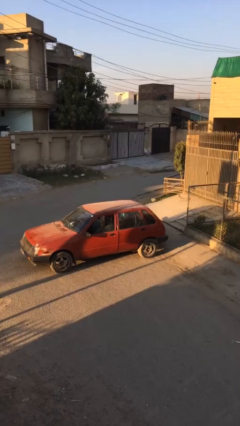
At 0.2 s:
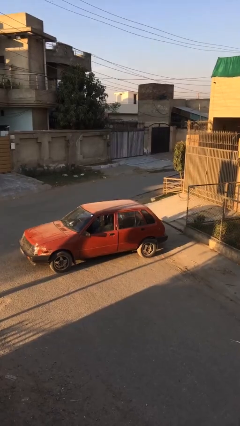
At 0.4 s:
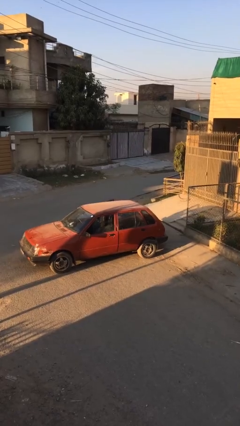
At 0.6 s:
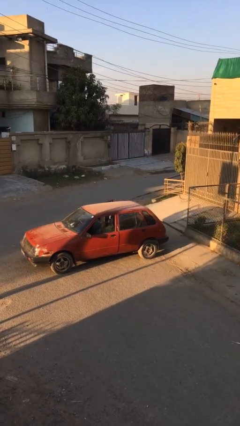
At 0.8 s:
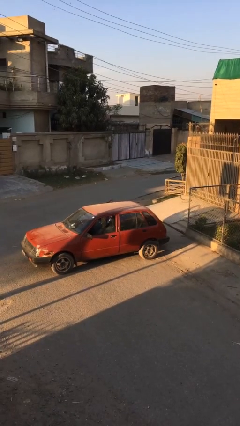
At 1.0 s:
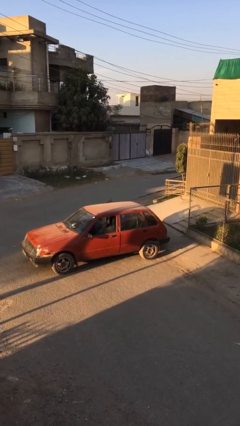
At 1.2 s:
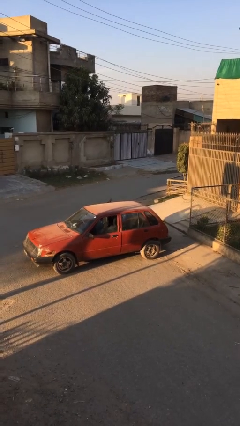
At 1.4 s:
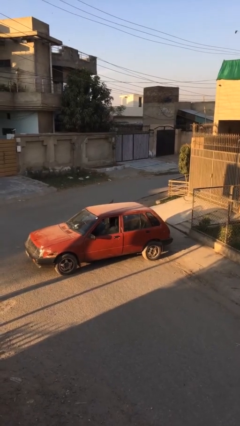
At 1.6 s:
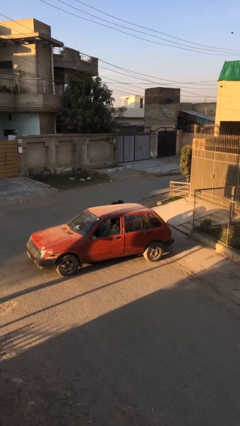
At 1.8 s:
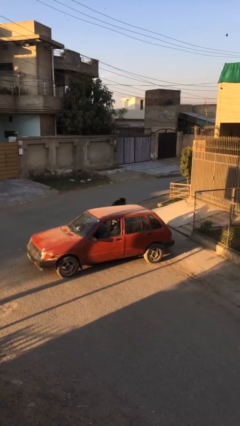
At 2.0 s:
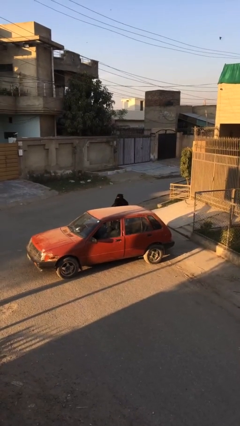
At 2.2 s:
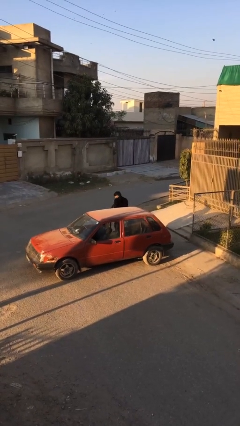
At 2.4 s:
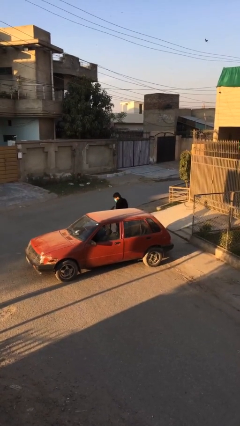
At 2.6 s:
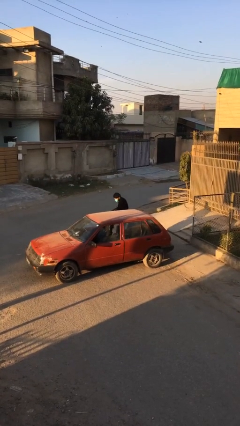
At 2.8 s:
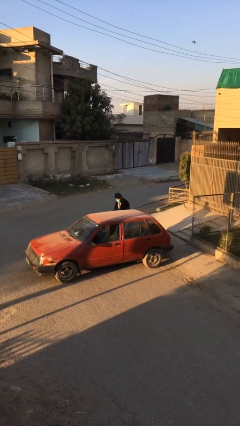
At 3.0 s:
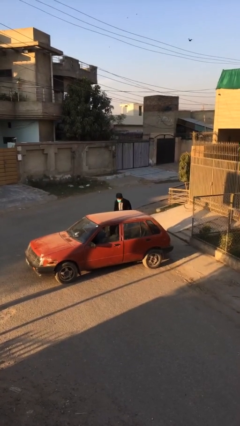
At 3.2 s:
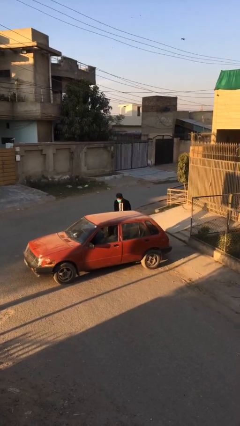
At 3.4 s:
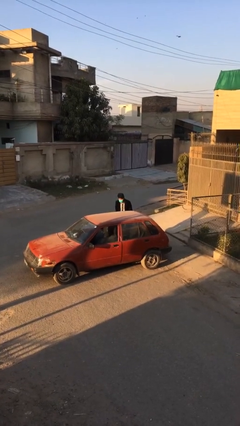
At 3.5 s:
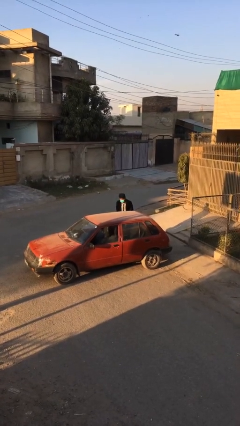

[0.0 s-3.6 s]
person exits car

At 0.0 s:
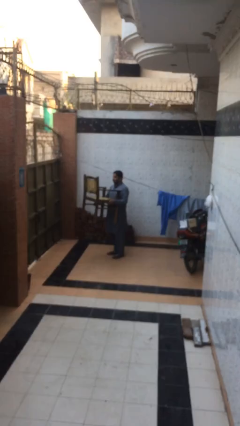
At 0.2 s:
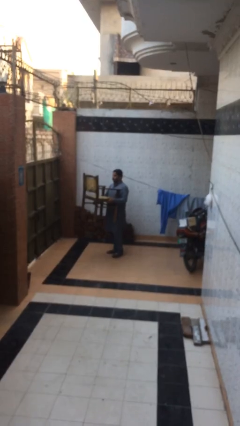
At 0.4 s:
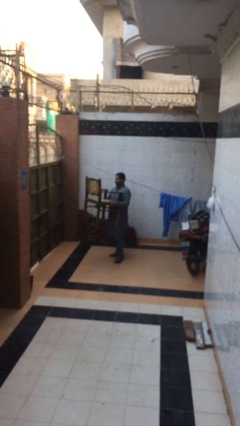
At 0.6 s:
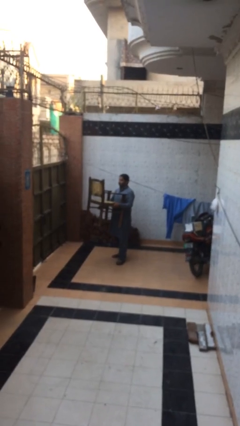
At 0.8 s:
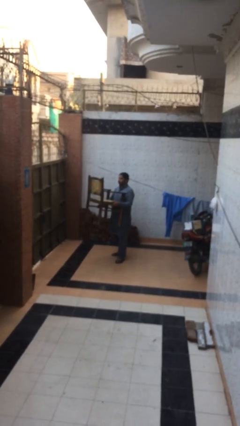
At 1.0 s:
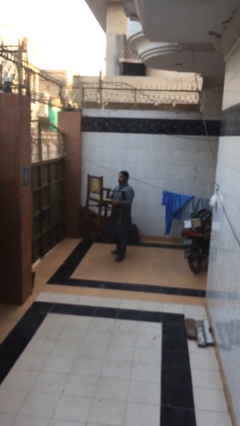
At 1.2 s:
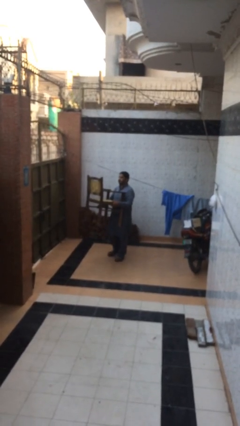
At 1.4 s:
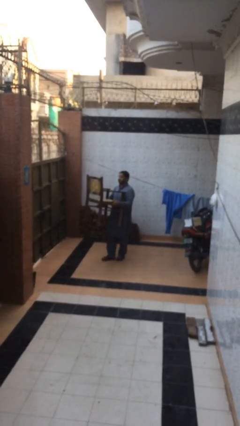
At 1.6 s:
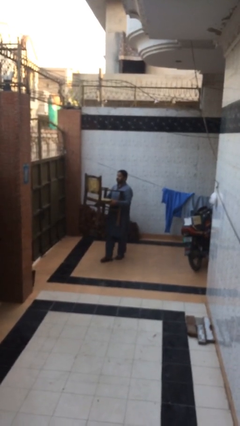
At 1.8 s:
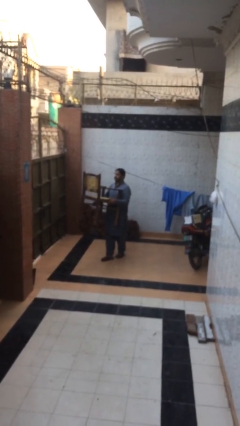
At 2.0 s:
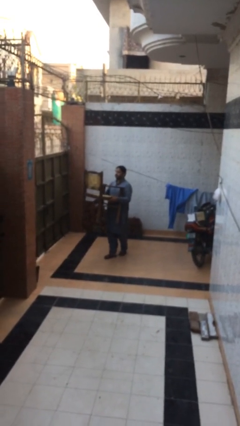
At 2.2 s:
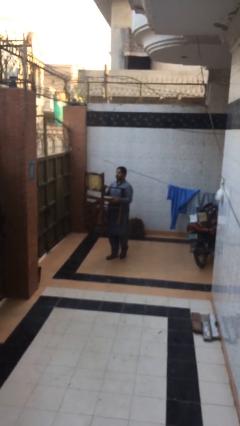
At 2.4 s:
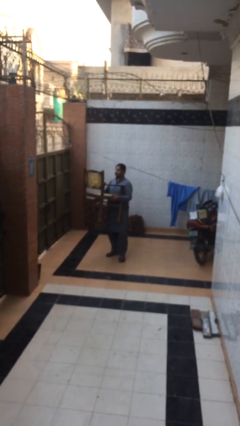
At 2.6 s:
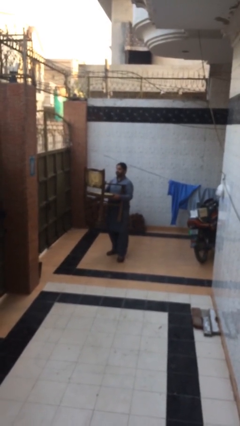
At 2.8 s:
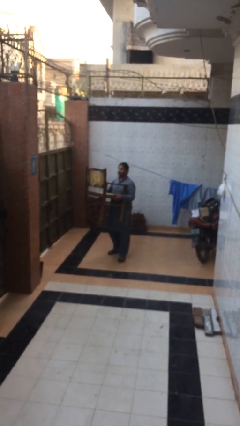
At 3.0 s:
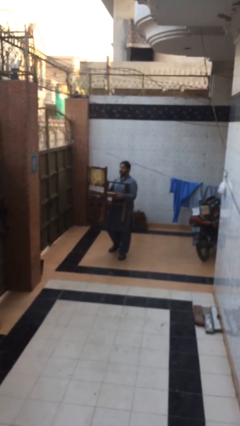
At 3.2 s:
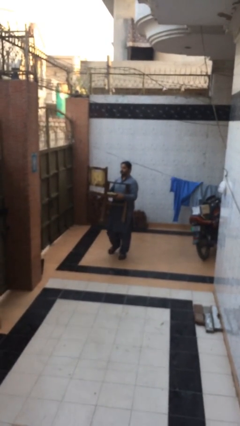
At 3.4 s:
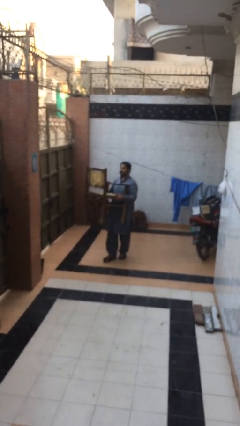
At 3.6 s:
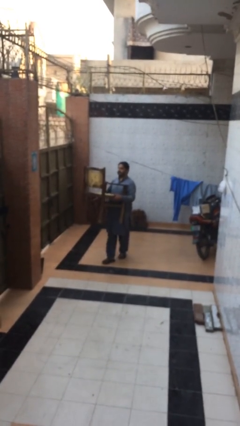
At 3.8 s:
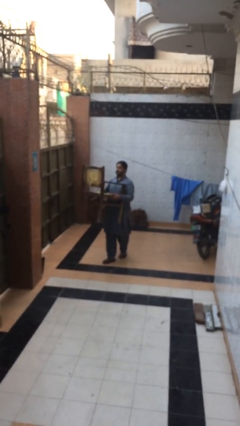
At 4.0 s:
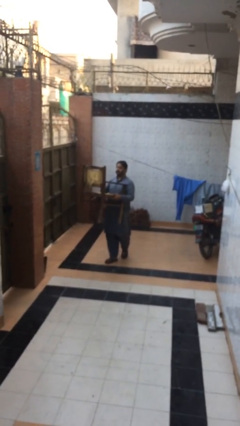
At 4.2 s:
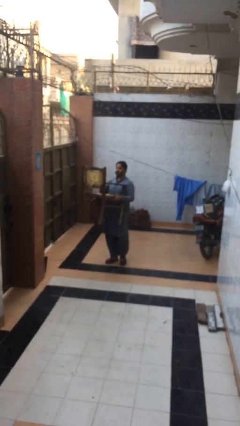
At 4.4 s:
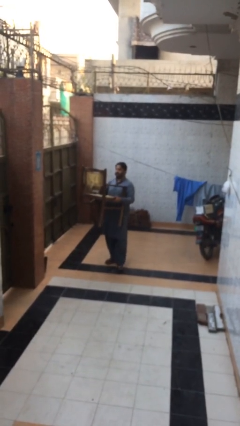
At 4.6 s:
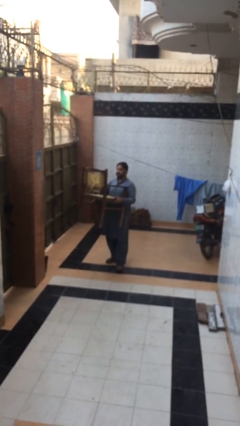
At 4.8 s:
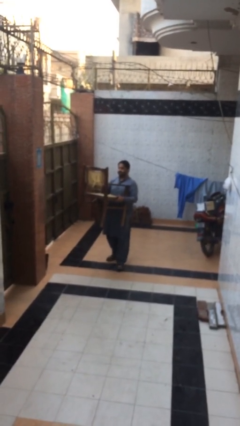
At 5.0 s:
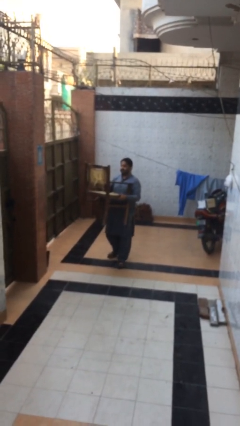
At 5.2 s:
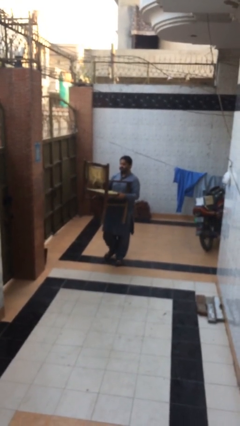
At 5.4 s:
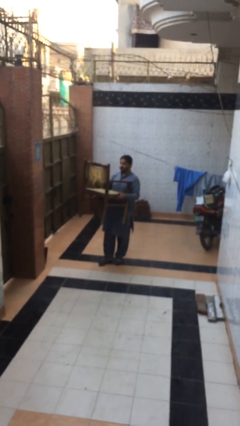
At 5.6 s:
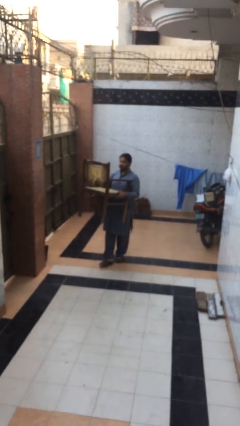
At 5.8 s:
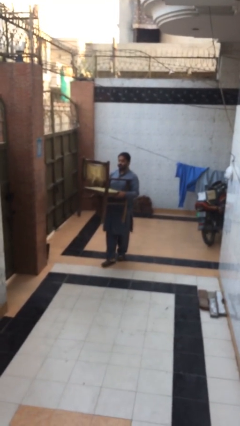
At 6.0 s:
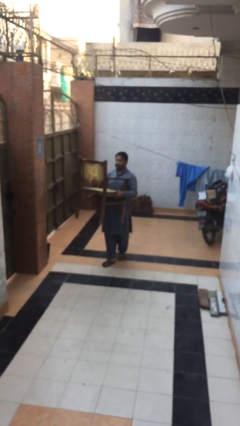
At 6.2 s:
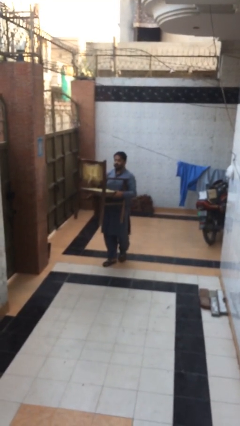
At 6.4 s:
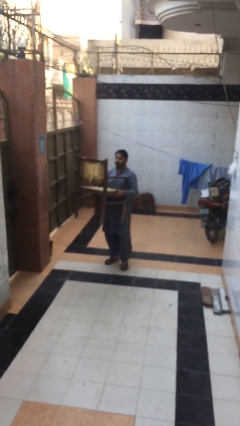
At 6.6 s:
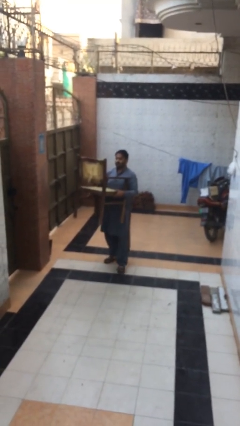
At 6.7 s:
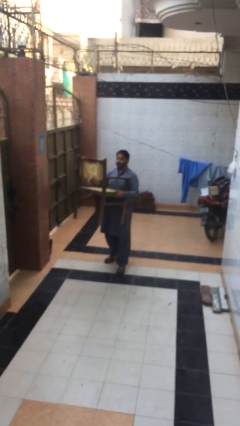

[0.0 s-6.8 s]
person carries heavy object

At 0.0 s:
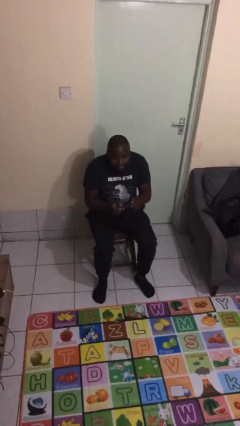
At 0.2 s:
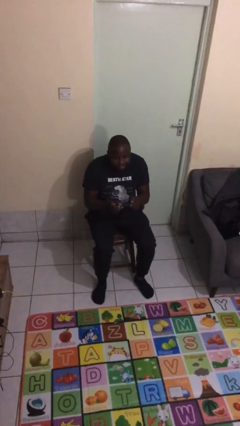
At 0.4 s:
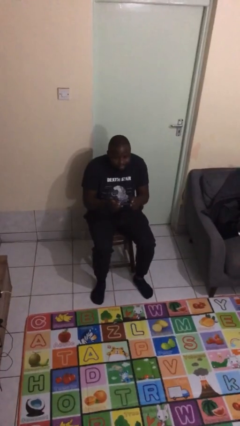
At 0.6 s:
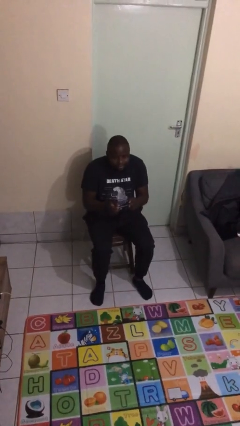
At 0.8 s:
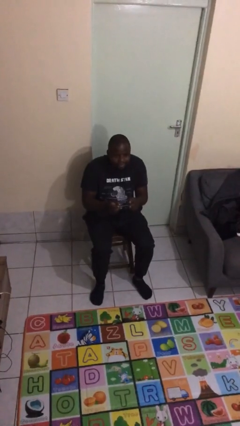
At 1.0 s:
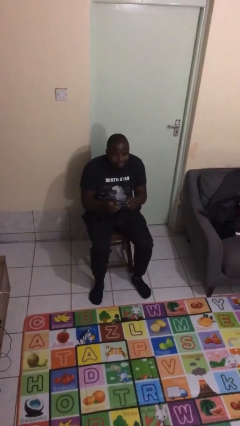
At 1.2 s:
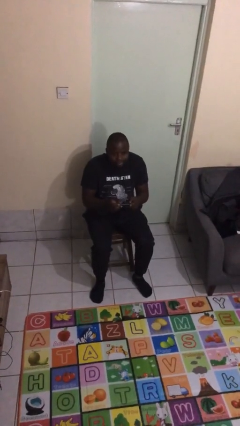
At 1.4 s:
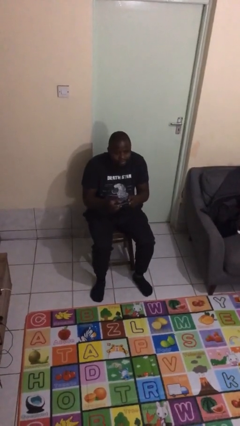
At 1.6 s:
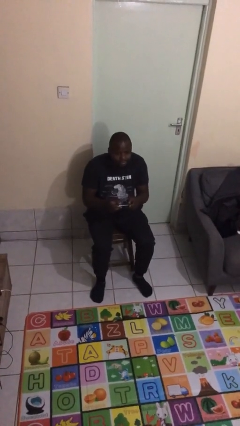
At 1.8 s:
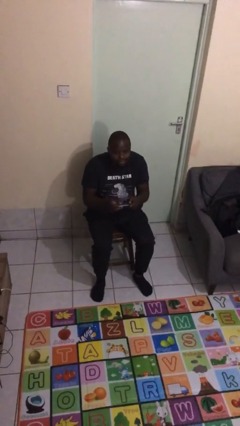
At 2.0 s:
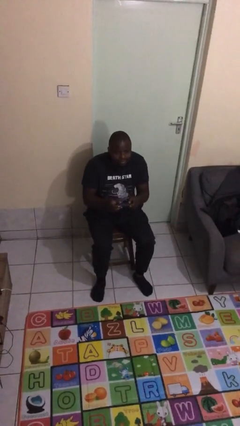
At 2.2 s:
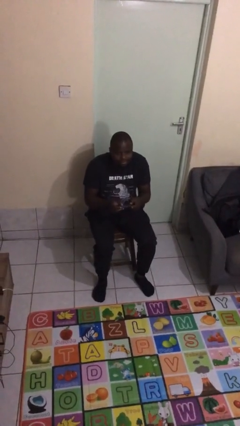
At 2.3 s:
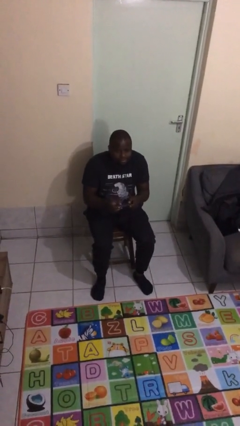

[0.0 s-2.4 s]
person interacts with handheld game

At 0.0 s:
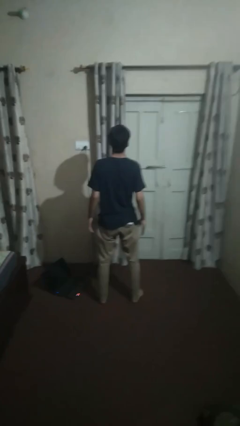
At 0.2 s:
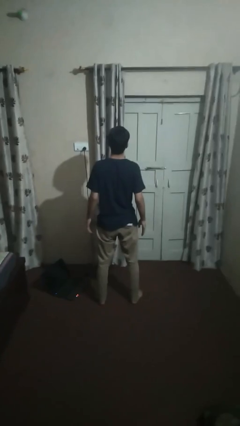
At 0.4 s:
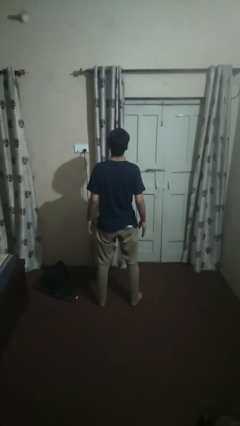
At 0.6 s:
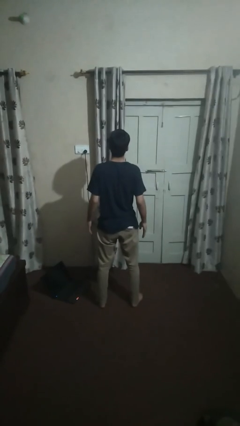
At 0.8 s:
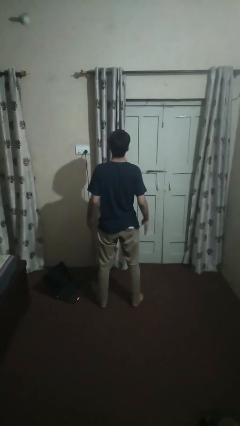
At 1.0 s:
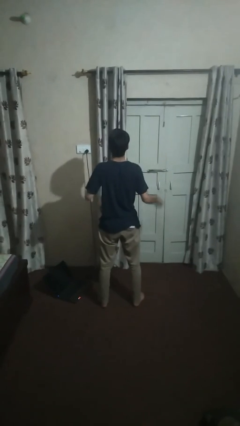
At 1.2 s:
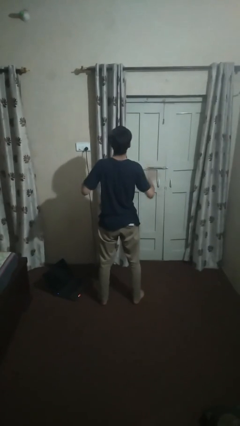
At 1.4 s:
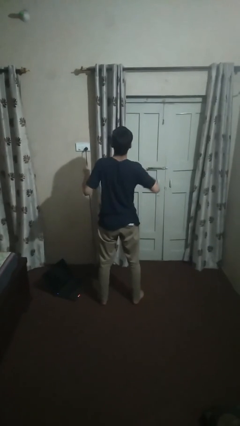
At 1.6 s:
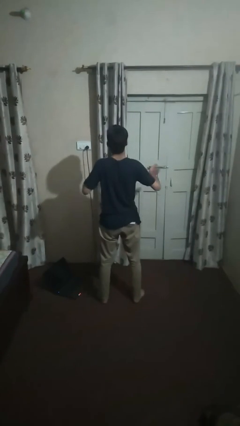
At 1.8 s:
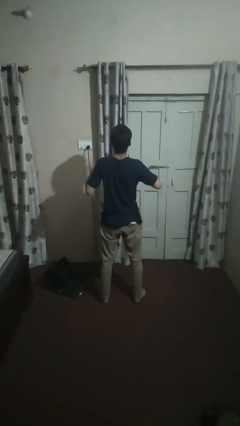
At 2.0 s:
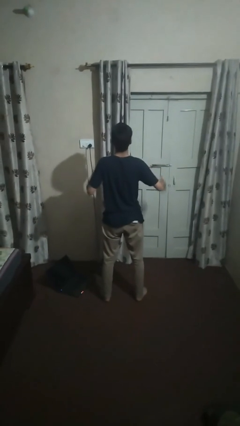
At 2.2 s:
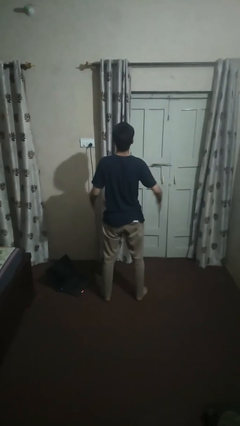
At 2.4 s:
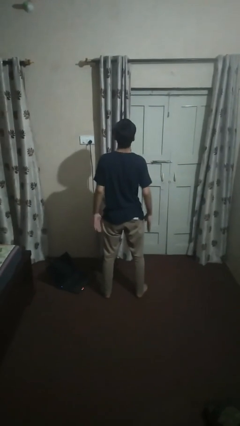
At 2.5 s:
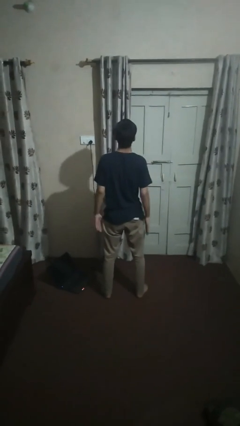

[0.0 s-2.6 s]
person drums on chest

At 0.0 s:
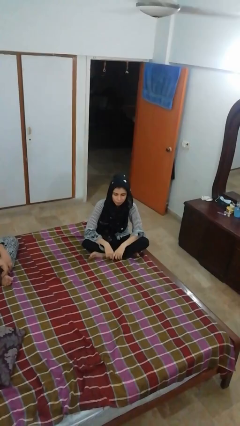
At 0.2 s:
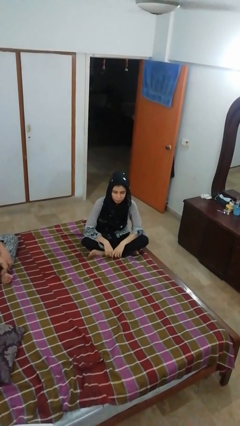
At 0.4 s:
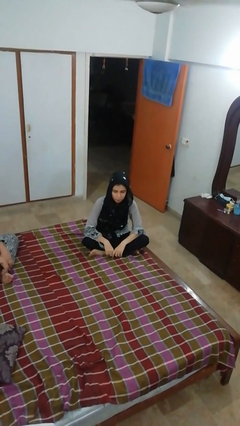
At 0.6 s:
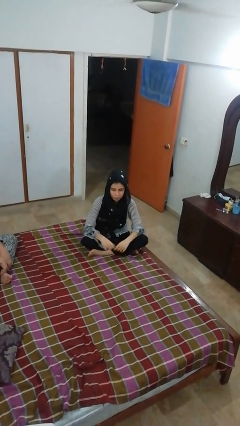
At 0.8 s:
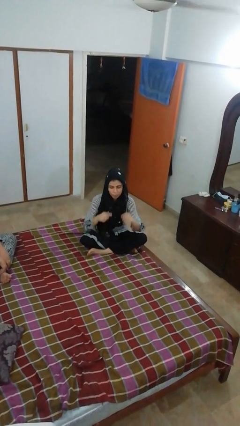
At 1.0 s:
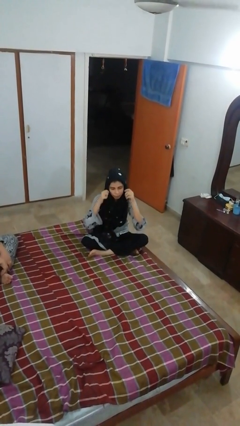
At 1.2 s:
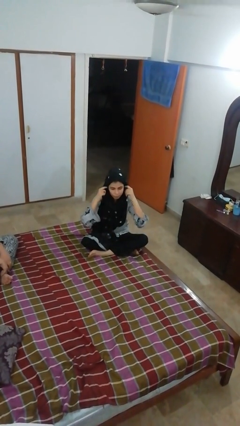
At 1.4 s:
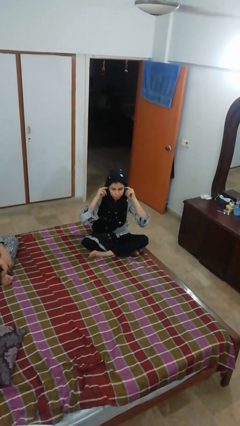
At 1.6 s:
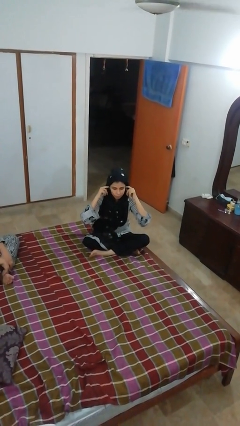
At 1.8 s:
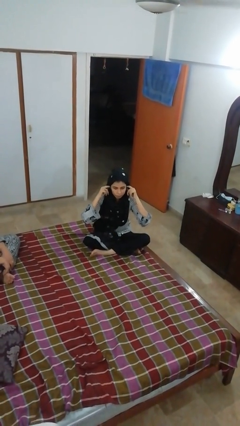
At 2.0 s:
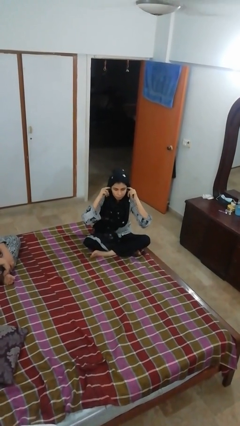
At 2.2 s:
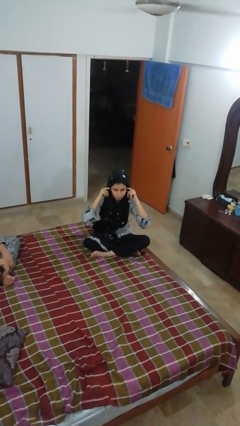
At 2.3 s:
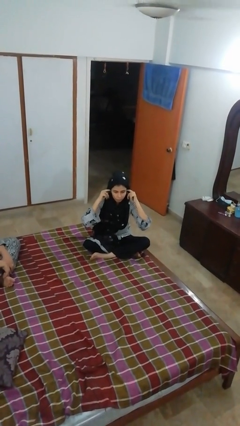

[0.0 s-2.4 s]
person puts fingers in ear
